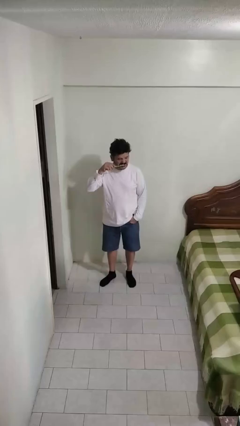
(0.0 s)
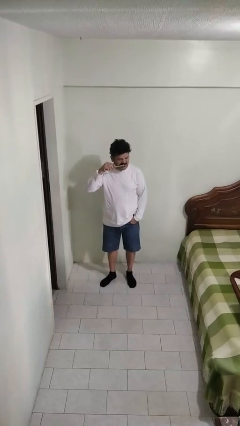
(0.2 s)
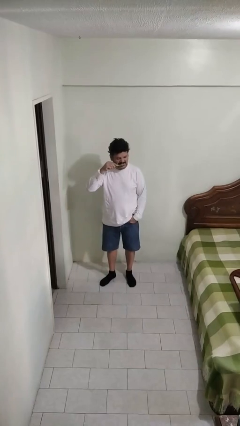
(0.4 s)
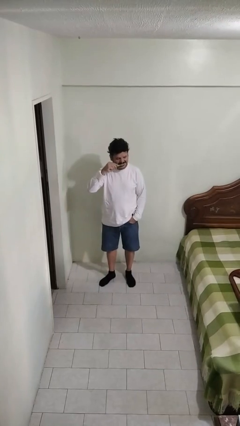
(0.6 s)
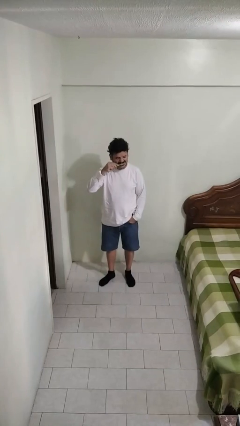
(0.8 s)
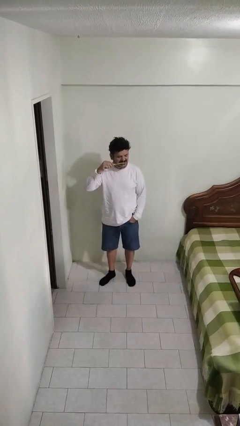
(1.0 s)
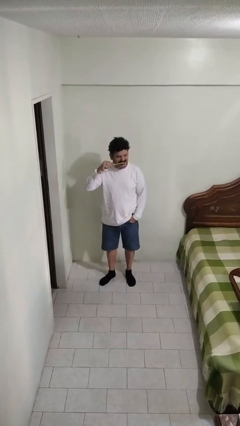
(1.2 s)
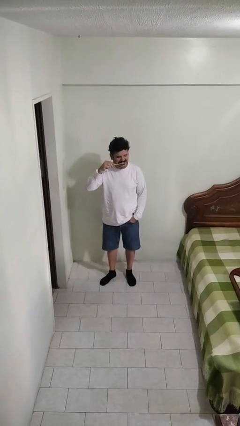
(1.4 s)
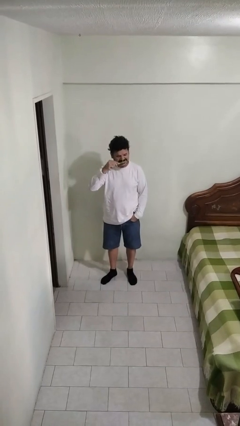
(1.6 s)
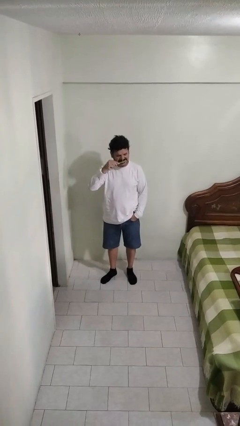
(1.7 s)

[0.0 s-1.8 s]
person brushes teeth

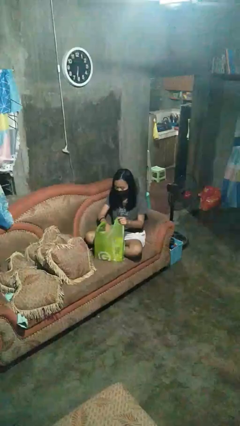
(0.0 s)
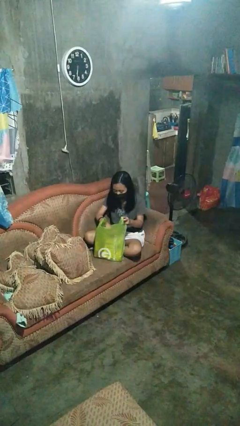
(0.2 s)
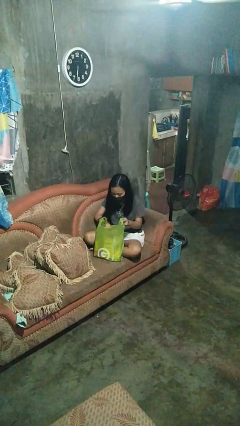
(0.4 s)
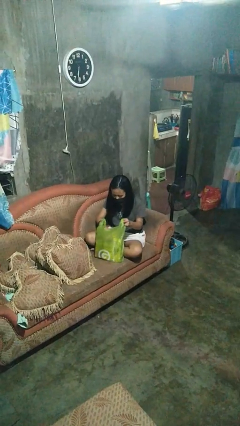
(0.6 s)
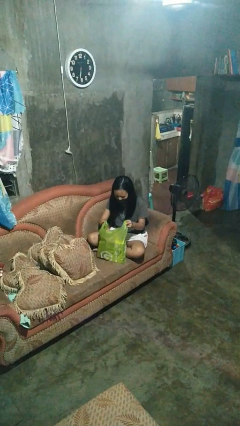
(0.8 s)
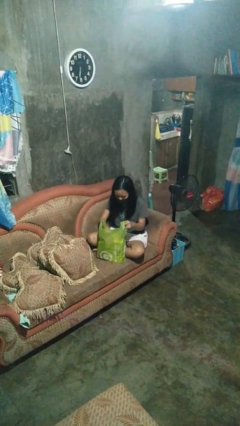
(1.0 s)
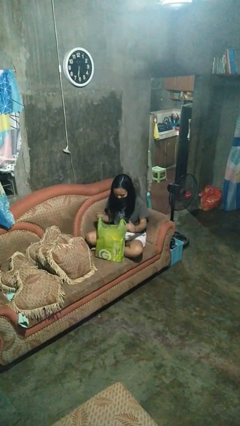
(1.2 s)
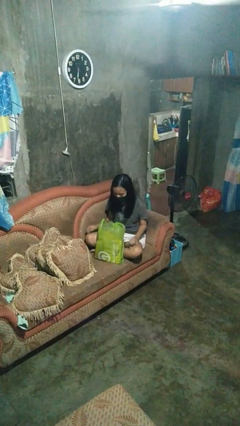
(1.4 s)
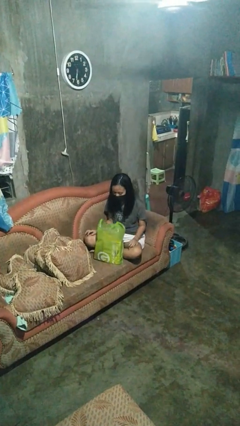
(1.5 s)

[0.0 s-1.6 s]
person searches in bag

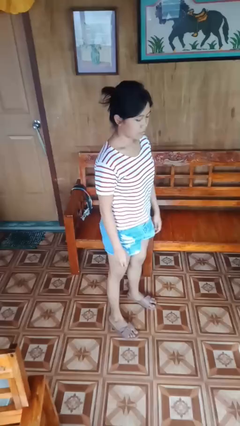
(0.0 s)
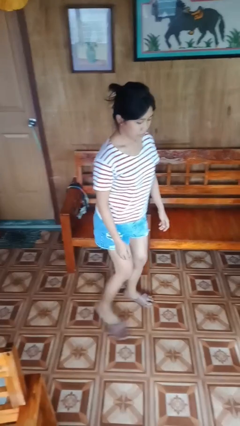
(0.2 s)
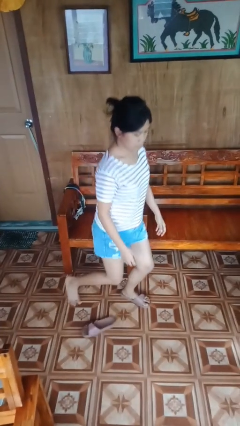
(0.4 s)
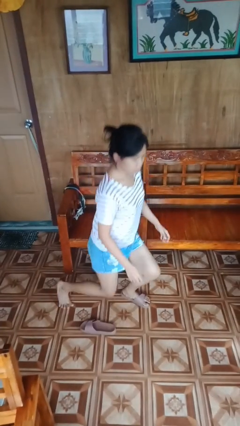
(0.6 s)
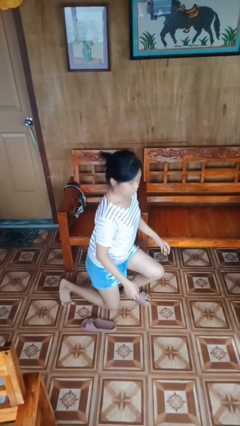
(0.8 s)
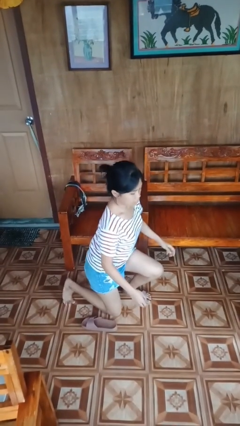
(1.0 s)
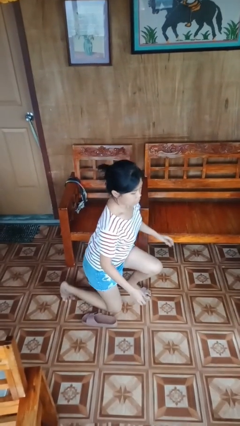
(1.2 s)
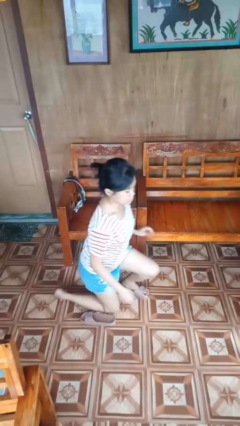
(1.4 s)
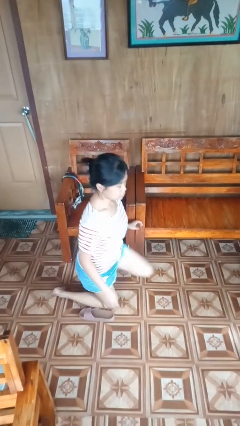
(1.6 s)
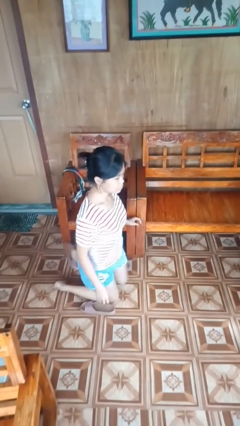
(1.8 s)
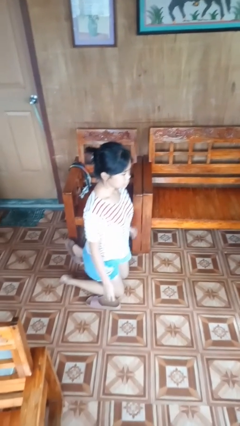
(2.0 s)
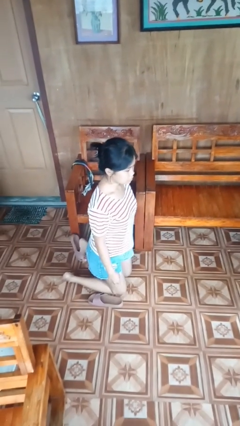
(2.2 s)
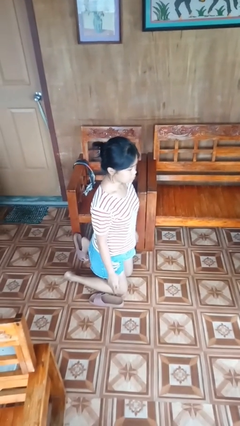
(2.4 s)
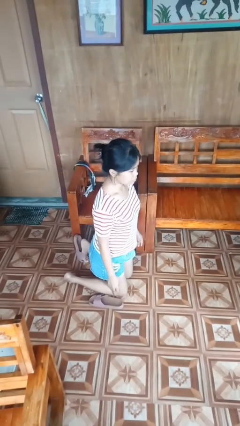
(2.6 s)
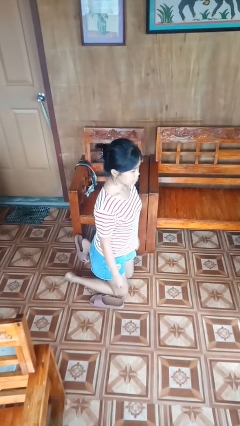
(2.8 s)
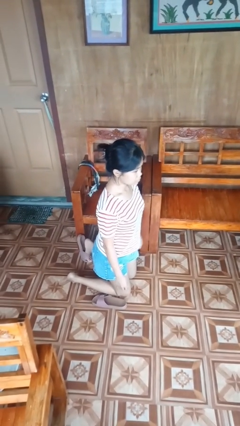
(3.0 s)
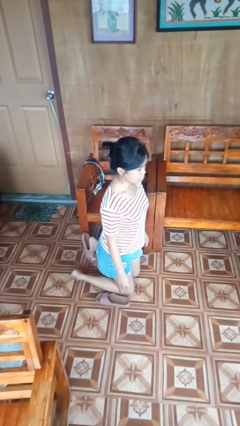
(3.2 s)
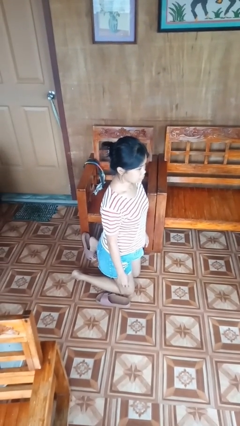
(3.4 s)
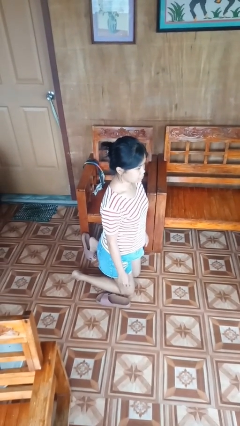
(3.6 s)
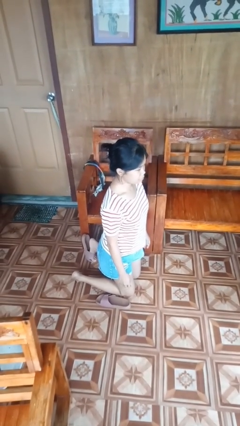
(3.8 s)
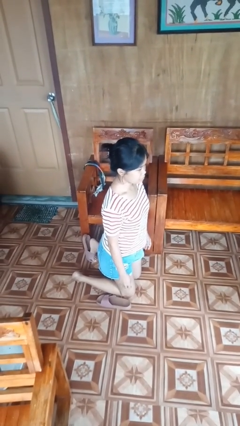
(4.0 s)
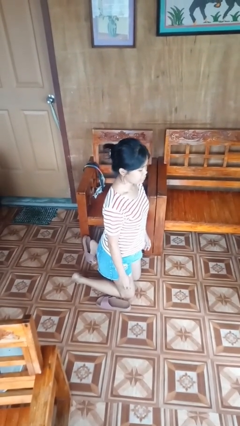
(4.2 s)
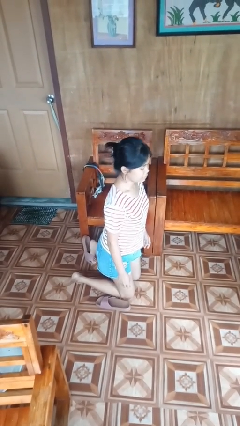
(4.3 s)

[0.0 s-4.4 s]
person kneels

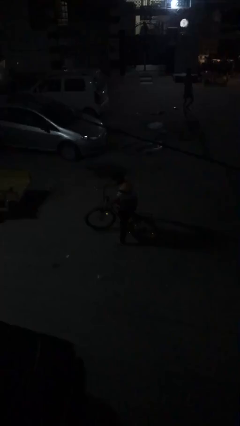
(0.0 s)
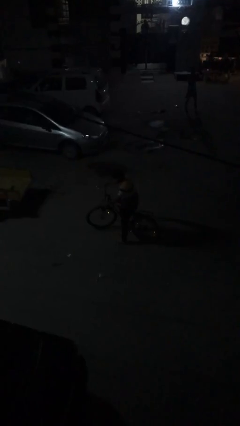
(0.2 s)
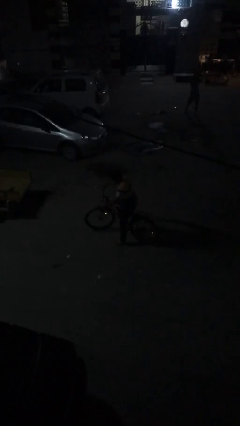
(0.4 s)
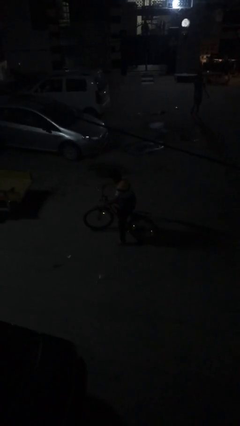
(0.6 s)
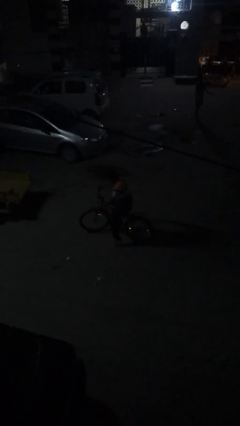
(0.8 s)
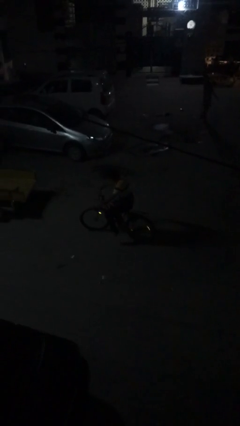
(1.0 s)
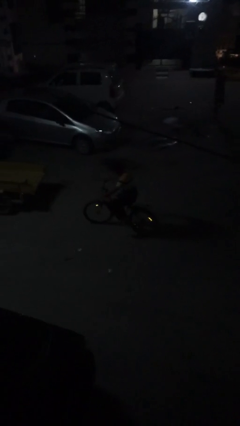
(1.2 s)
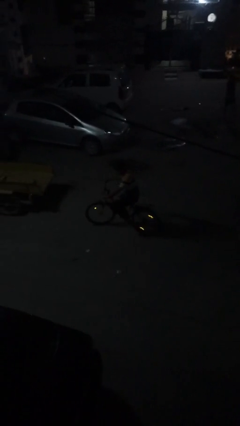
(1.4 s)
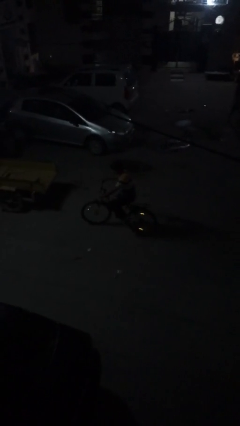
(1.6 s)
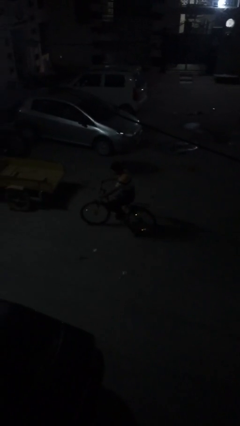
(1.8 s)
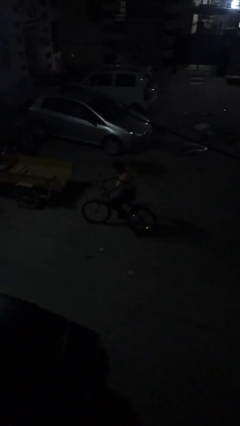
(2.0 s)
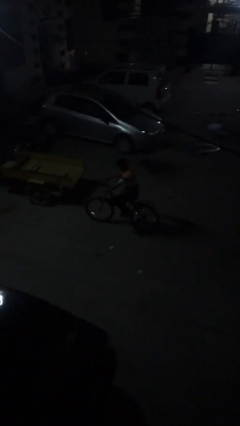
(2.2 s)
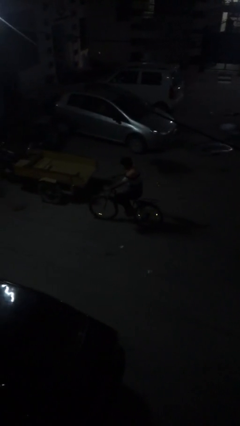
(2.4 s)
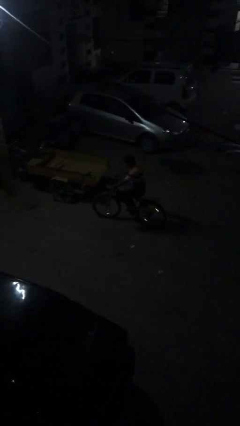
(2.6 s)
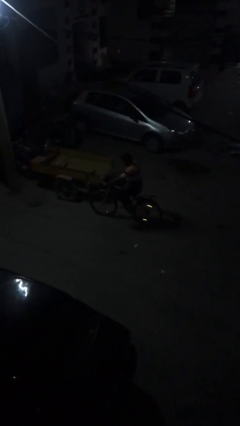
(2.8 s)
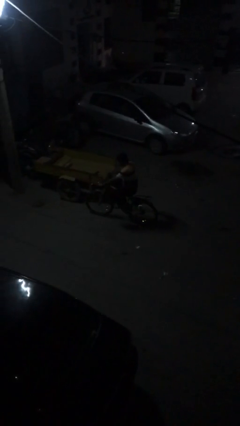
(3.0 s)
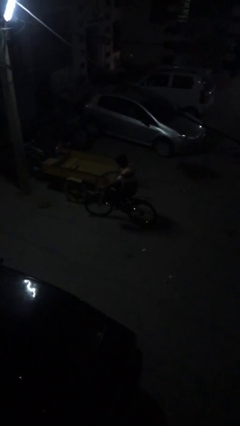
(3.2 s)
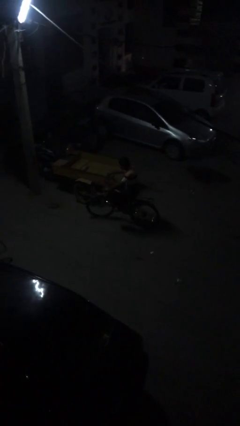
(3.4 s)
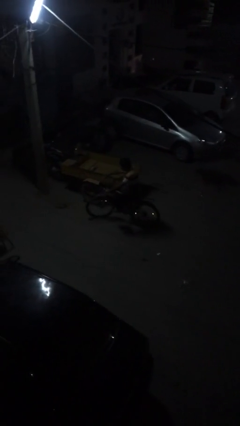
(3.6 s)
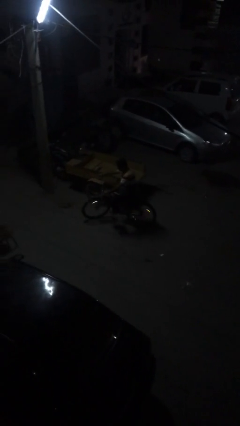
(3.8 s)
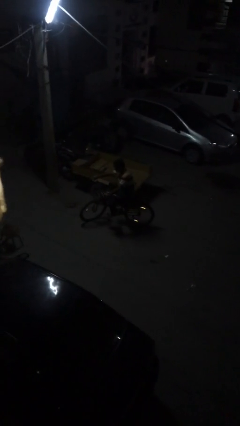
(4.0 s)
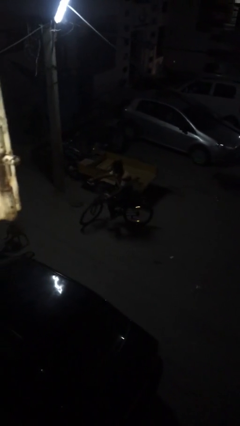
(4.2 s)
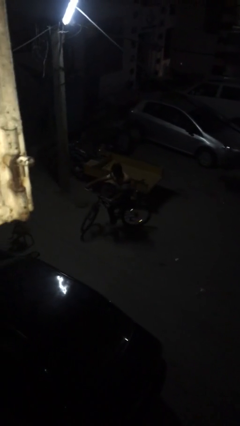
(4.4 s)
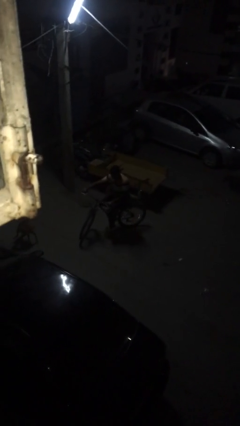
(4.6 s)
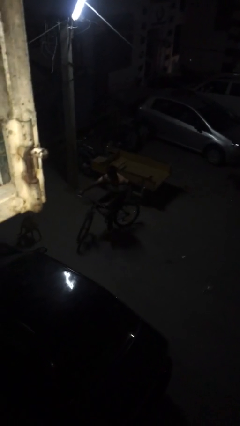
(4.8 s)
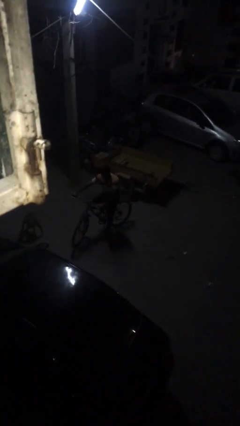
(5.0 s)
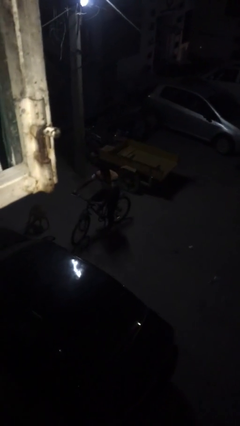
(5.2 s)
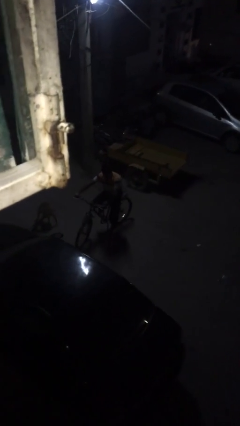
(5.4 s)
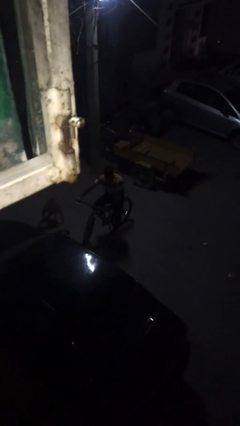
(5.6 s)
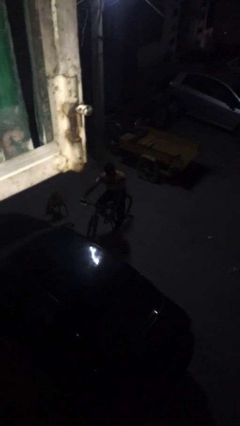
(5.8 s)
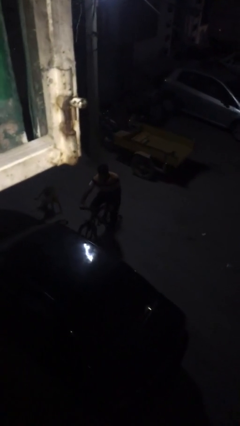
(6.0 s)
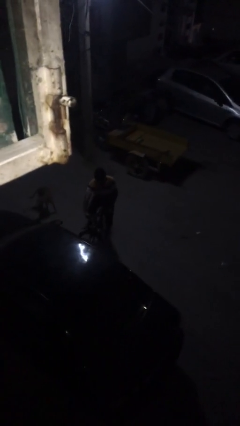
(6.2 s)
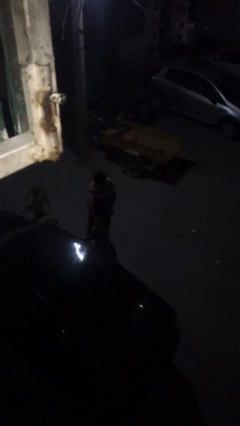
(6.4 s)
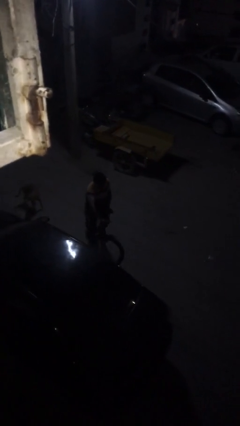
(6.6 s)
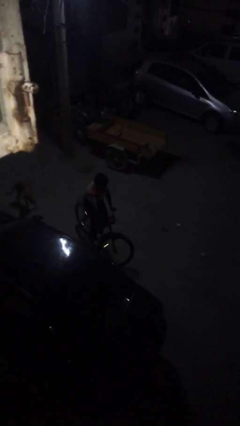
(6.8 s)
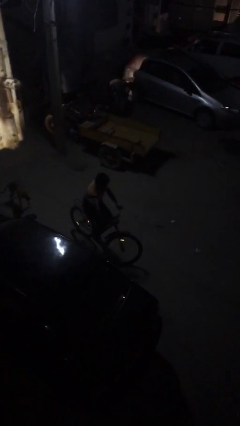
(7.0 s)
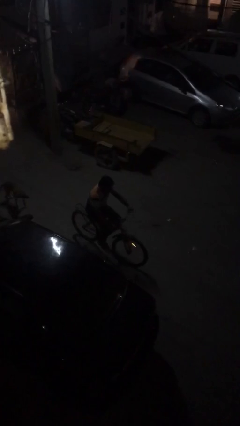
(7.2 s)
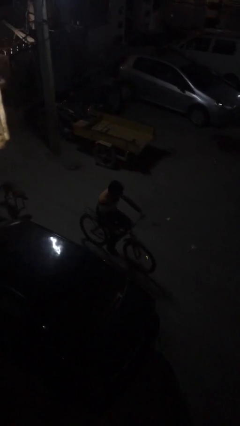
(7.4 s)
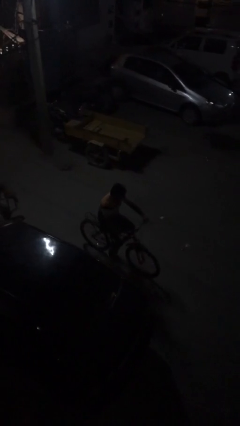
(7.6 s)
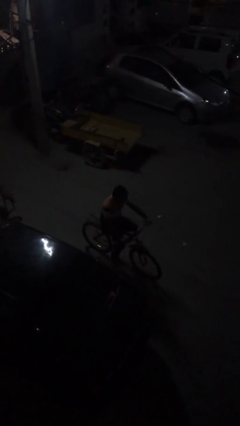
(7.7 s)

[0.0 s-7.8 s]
person rides bicycle

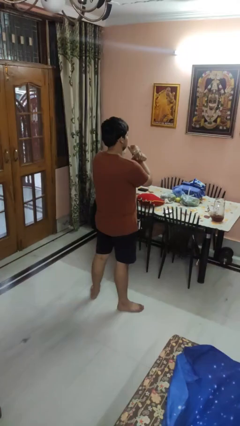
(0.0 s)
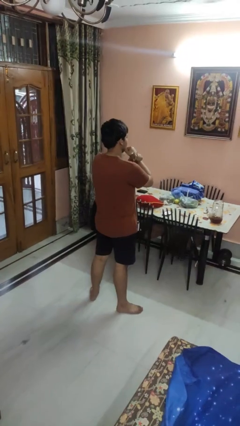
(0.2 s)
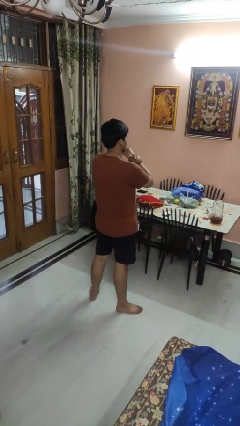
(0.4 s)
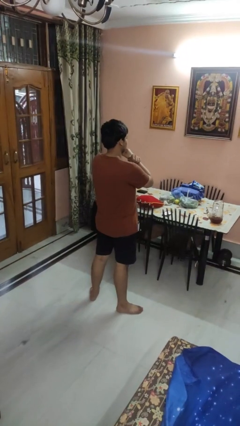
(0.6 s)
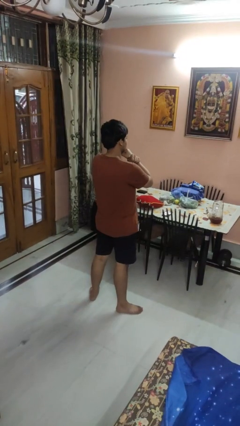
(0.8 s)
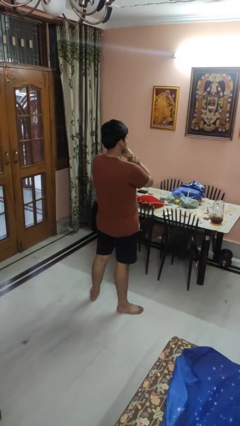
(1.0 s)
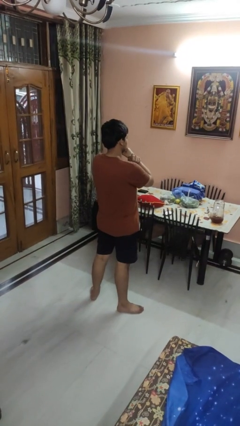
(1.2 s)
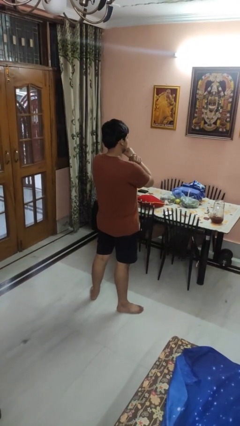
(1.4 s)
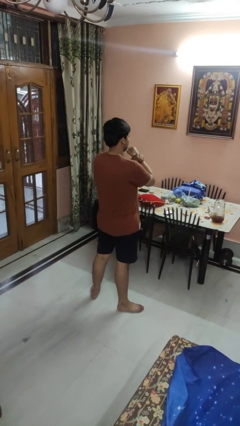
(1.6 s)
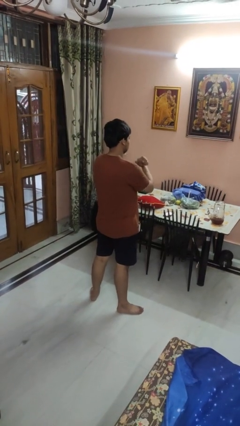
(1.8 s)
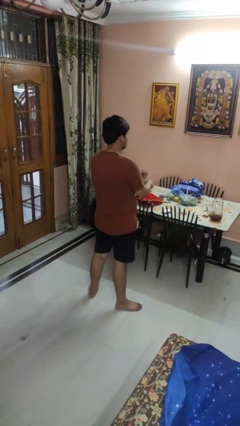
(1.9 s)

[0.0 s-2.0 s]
person gestures arms x
